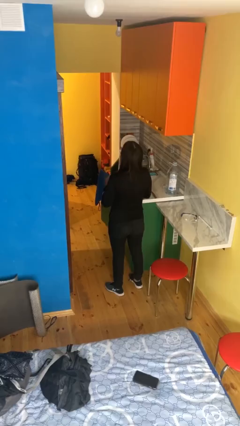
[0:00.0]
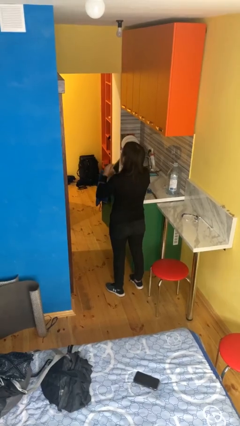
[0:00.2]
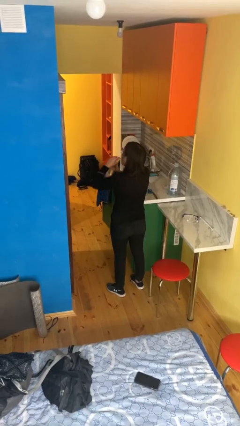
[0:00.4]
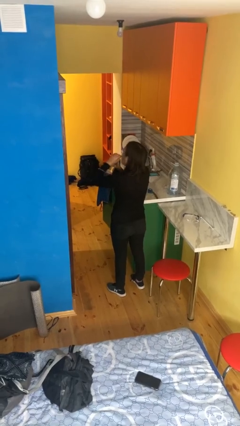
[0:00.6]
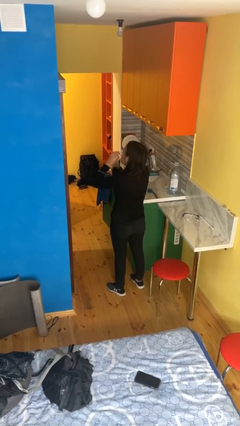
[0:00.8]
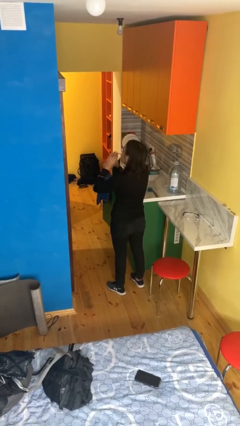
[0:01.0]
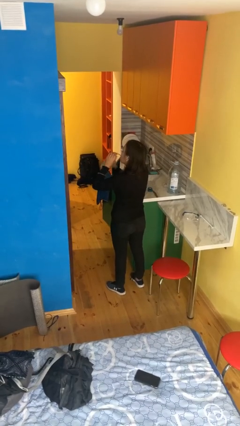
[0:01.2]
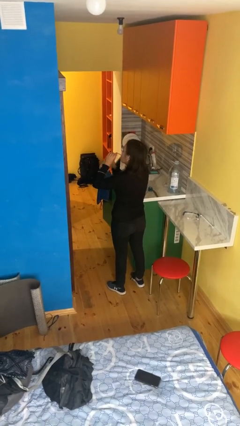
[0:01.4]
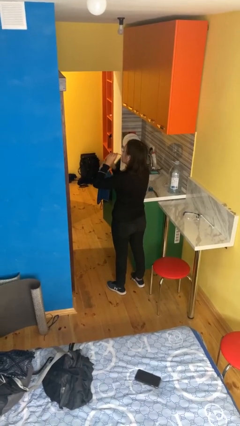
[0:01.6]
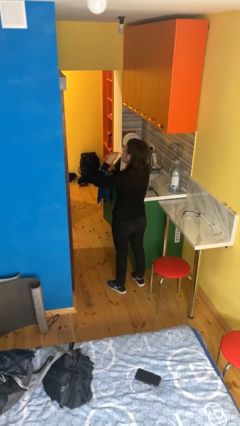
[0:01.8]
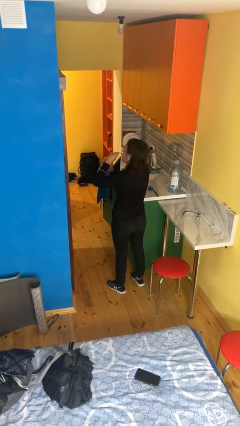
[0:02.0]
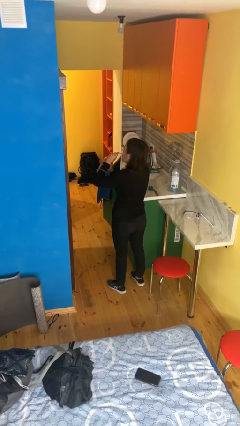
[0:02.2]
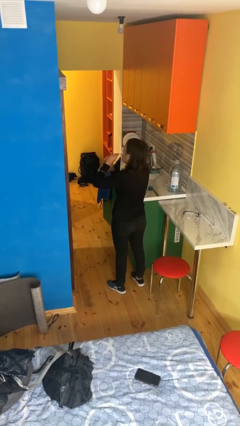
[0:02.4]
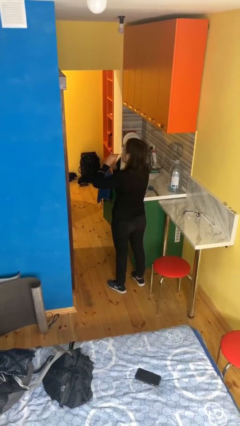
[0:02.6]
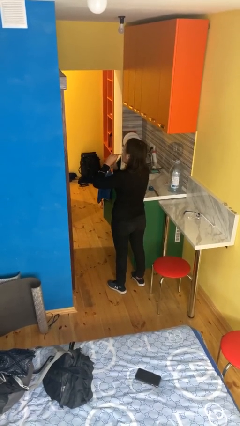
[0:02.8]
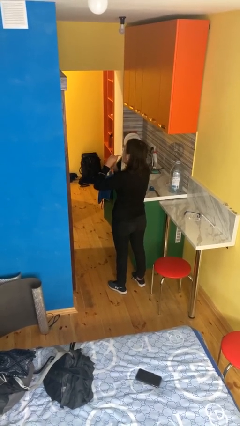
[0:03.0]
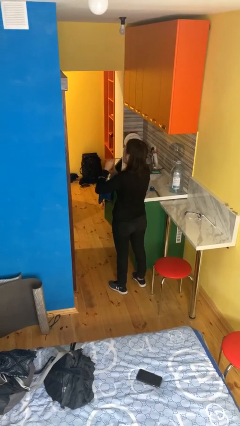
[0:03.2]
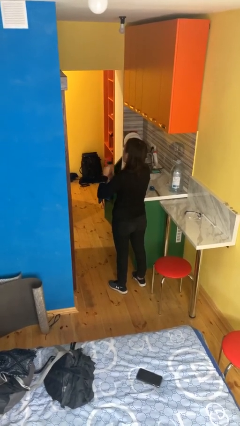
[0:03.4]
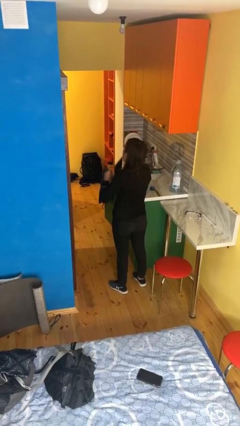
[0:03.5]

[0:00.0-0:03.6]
person drinks from straw

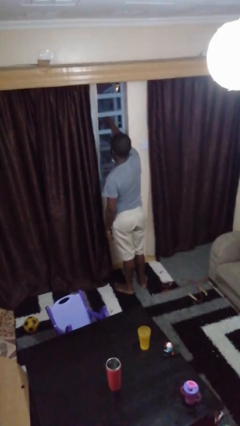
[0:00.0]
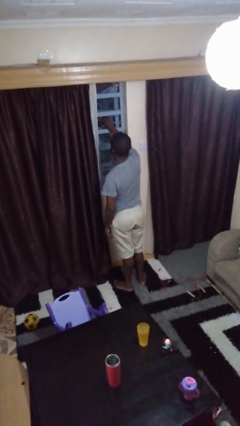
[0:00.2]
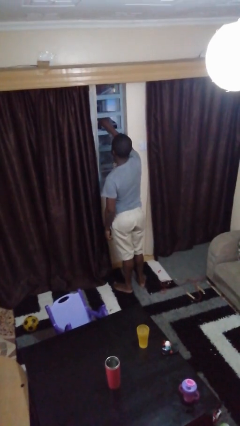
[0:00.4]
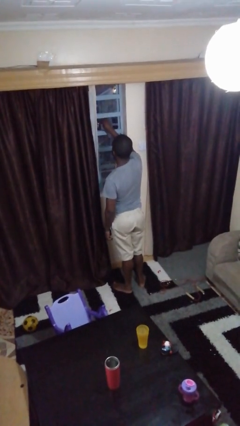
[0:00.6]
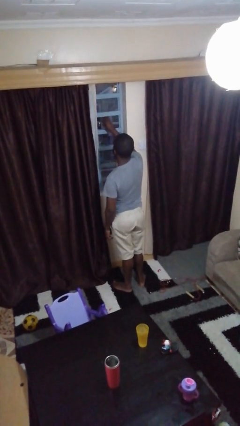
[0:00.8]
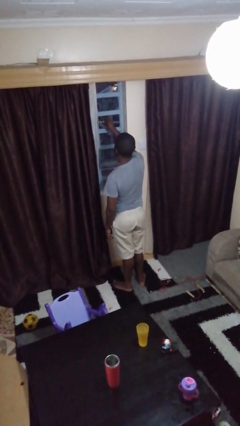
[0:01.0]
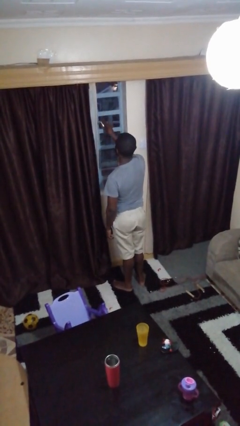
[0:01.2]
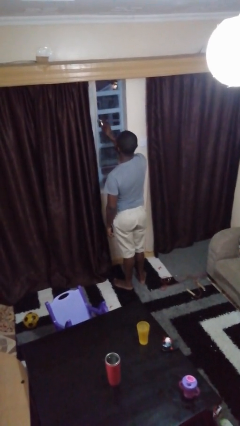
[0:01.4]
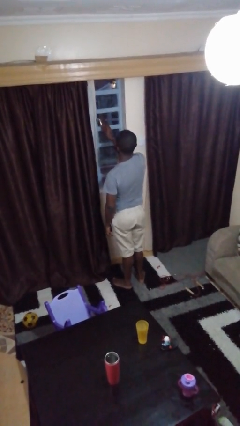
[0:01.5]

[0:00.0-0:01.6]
person closes home window

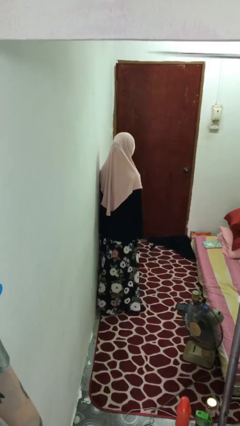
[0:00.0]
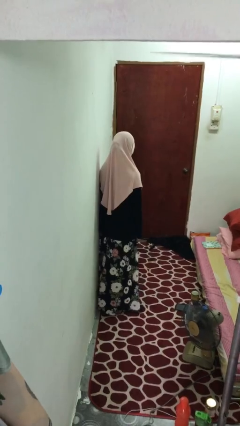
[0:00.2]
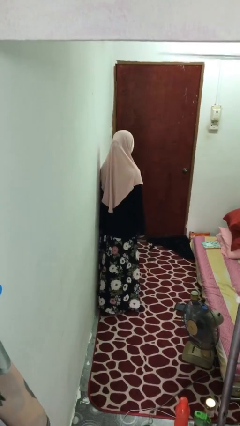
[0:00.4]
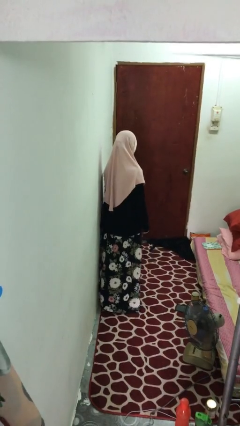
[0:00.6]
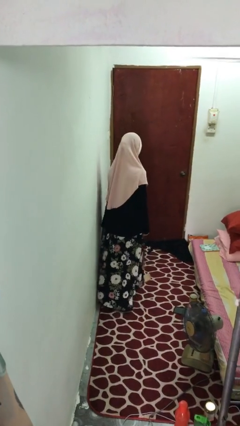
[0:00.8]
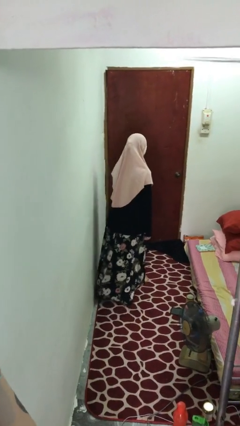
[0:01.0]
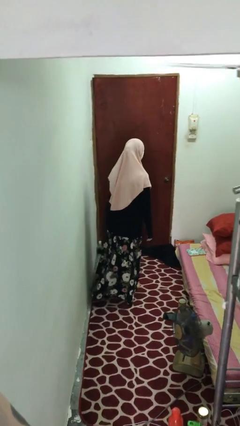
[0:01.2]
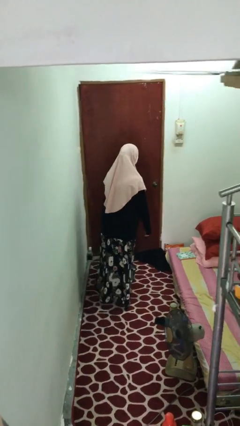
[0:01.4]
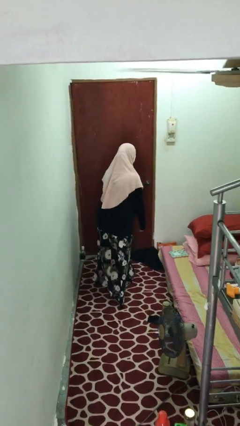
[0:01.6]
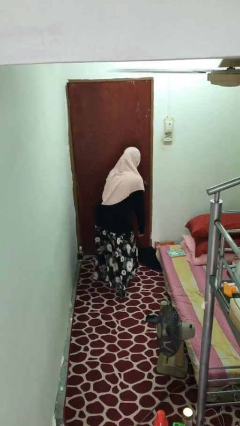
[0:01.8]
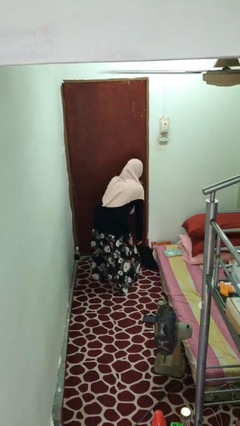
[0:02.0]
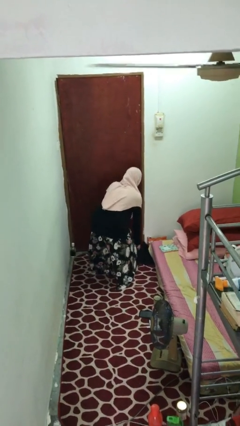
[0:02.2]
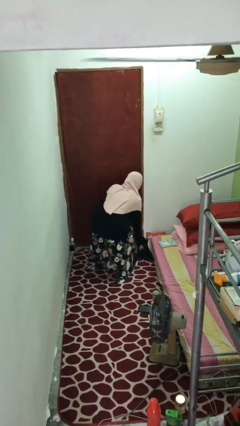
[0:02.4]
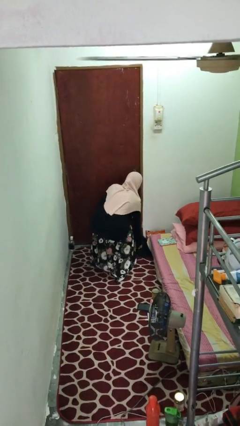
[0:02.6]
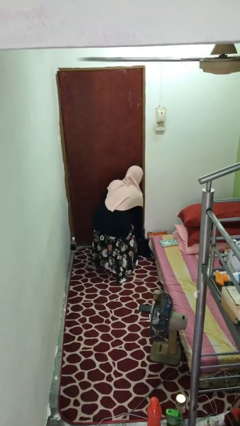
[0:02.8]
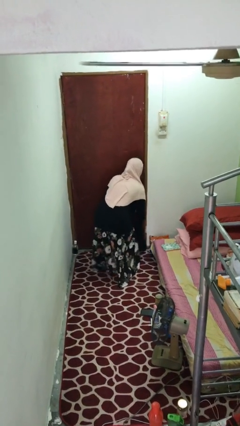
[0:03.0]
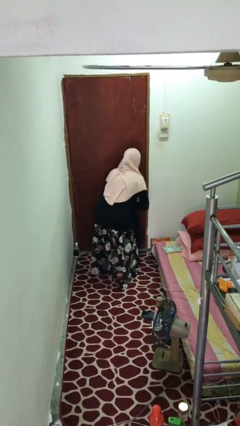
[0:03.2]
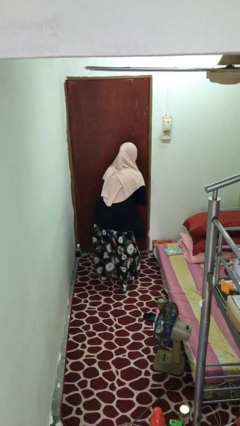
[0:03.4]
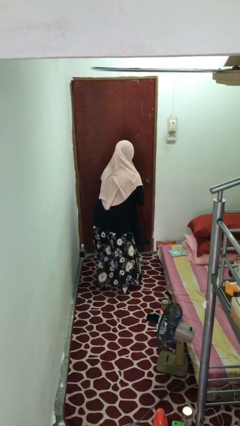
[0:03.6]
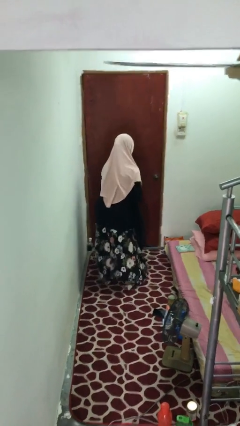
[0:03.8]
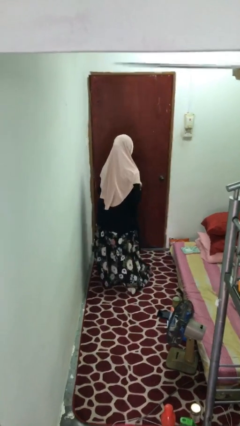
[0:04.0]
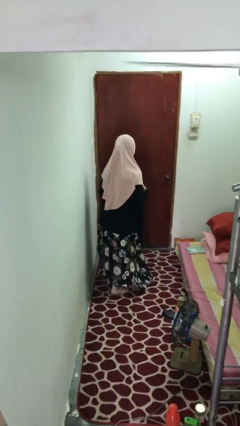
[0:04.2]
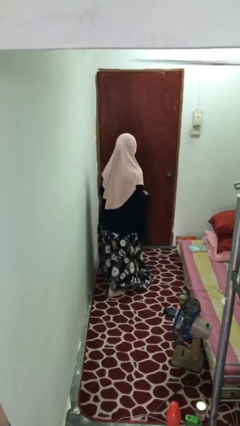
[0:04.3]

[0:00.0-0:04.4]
person picks up object from floor

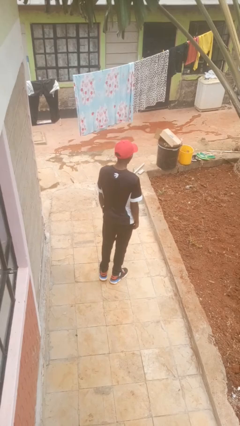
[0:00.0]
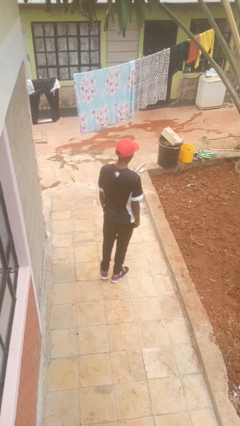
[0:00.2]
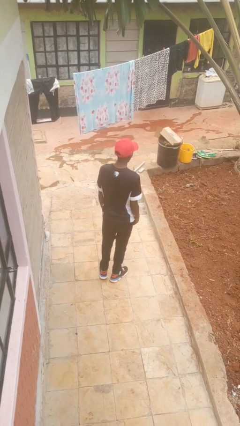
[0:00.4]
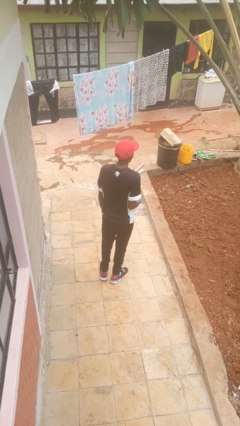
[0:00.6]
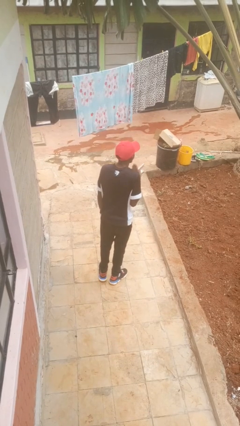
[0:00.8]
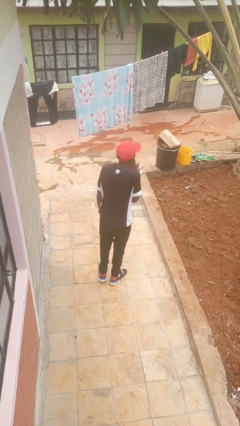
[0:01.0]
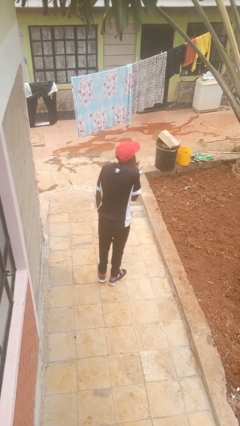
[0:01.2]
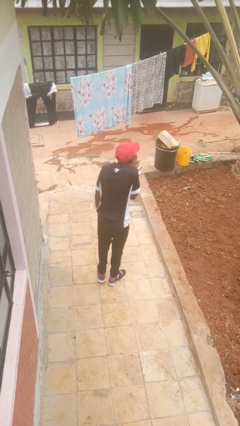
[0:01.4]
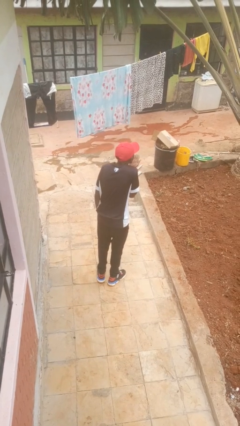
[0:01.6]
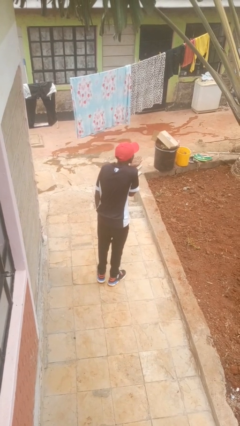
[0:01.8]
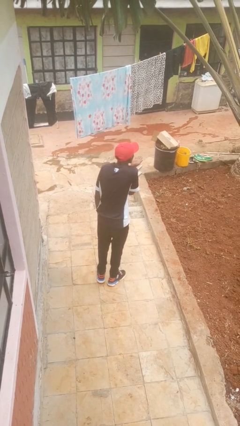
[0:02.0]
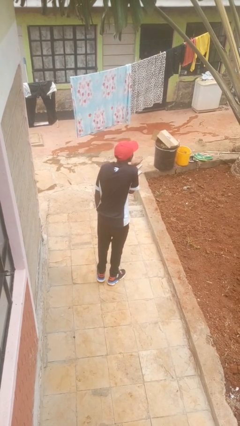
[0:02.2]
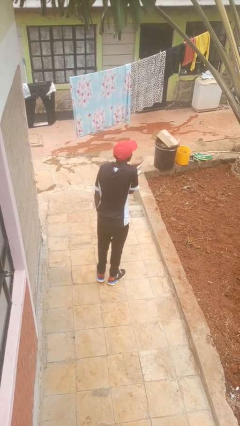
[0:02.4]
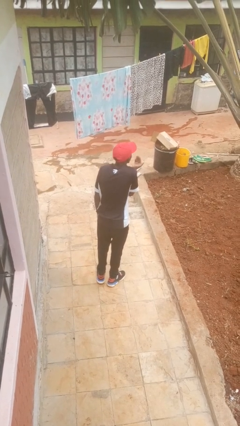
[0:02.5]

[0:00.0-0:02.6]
person gestures blow kiss

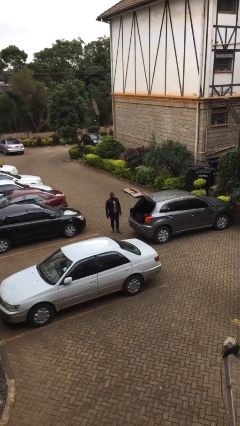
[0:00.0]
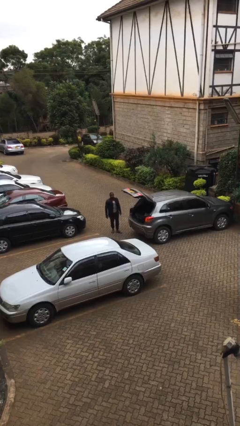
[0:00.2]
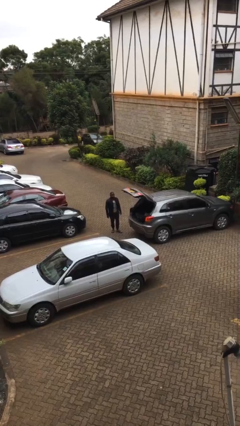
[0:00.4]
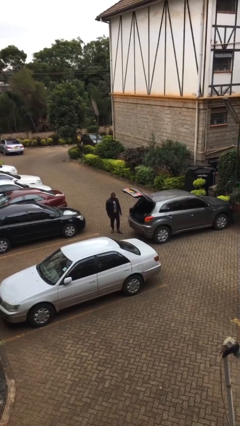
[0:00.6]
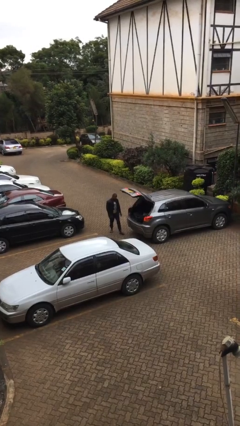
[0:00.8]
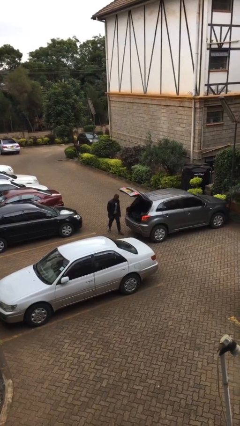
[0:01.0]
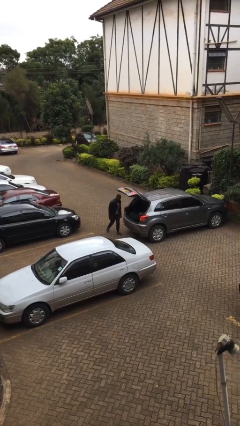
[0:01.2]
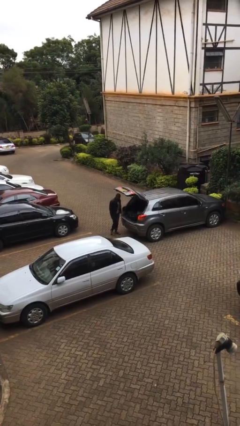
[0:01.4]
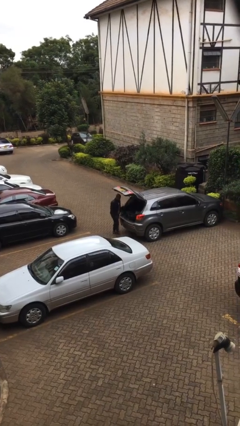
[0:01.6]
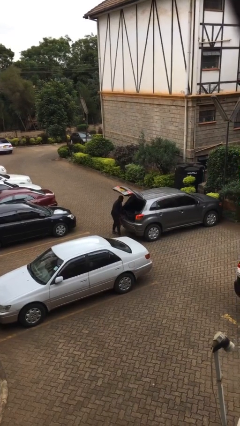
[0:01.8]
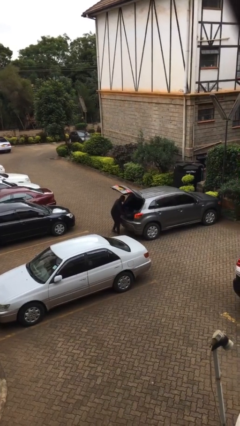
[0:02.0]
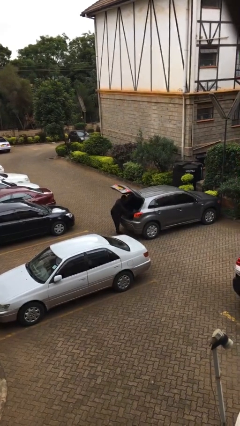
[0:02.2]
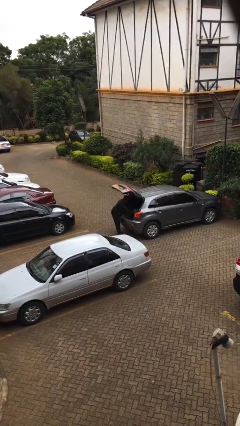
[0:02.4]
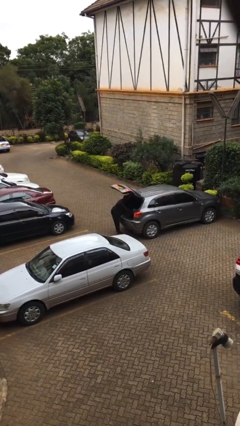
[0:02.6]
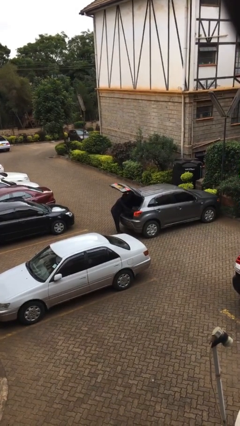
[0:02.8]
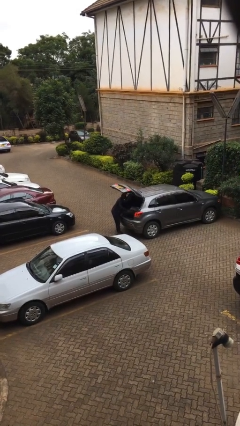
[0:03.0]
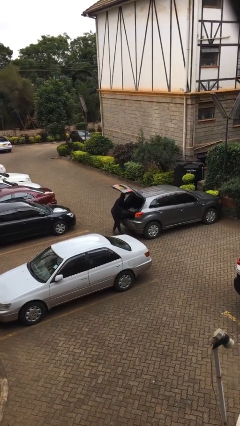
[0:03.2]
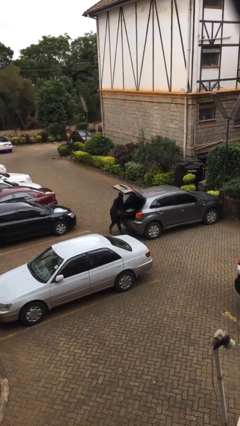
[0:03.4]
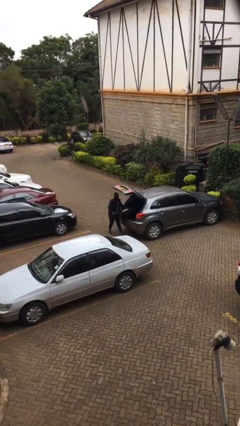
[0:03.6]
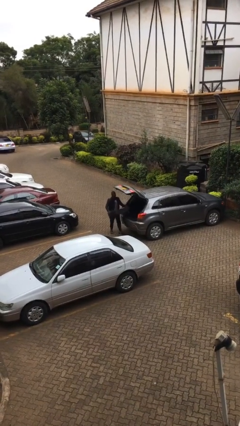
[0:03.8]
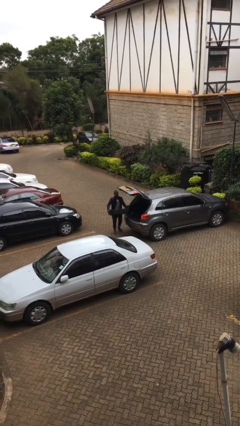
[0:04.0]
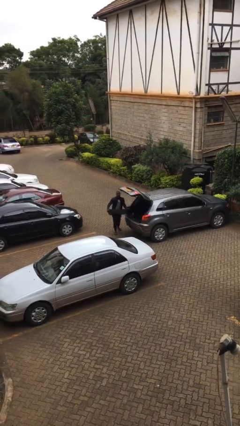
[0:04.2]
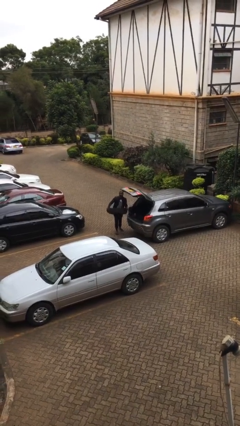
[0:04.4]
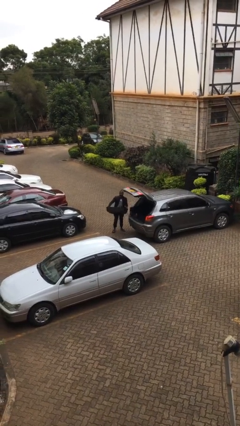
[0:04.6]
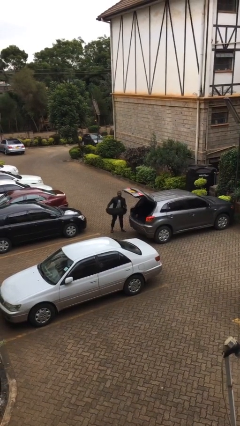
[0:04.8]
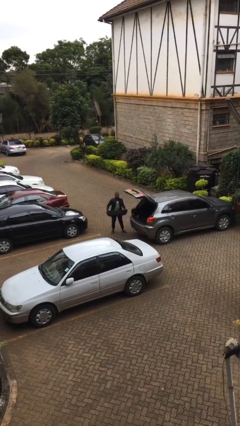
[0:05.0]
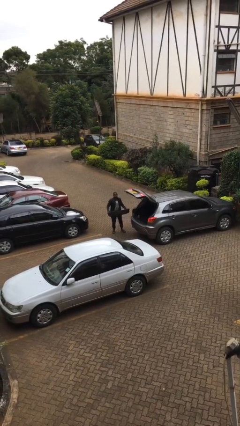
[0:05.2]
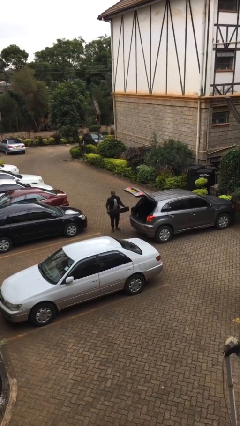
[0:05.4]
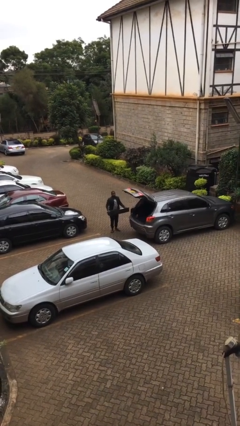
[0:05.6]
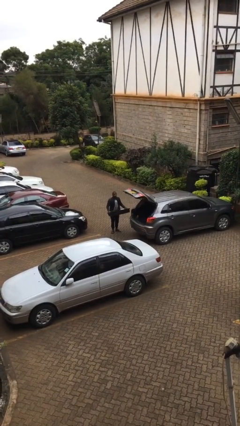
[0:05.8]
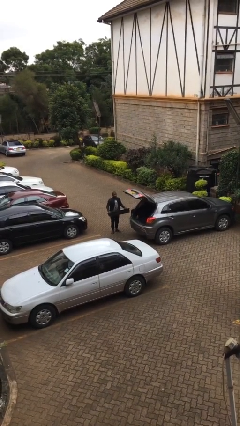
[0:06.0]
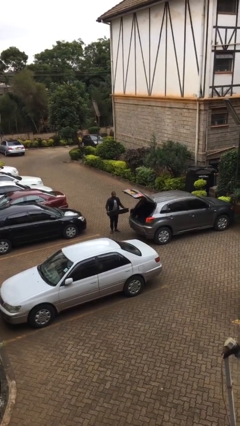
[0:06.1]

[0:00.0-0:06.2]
person unloads car
